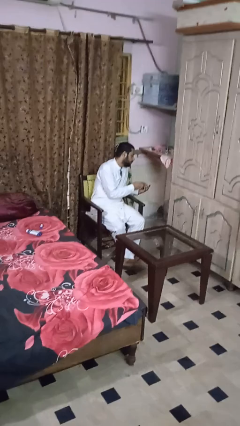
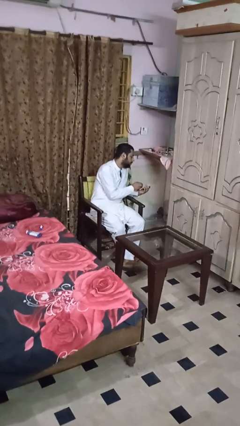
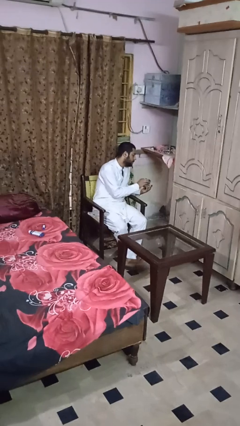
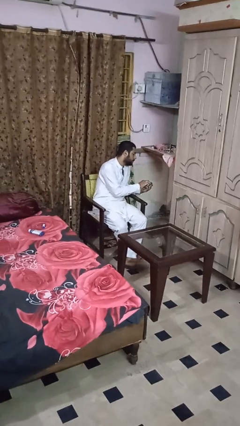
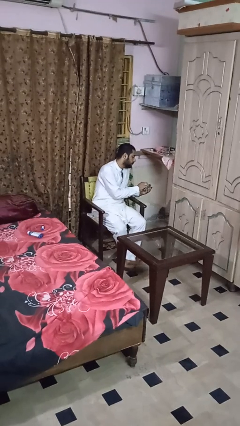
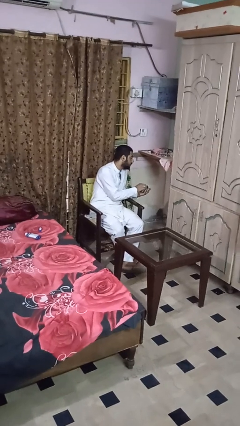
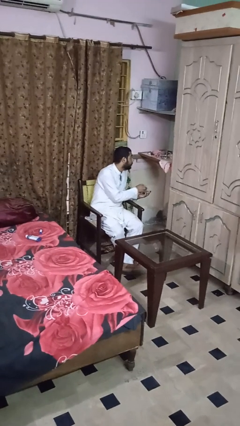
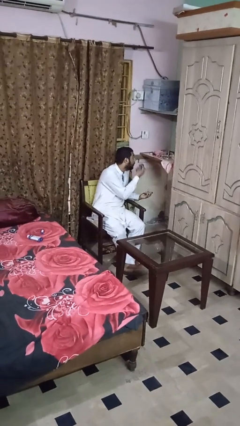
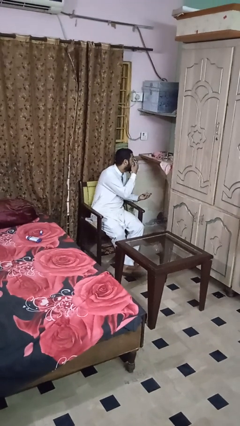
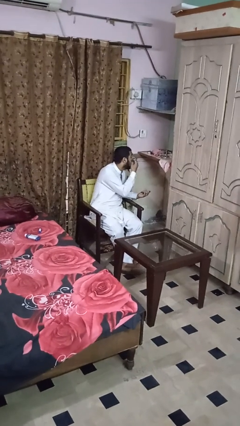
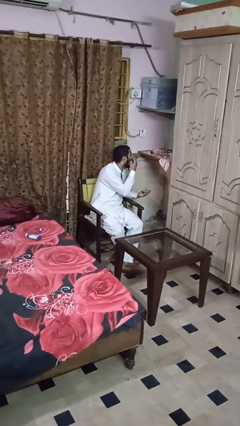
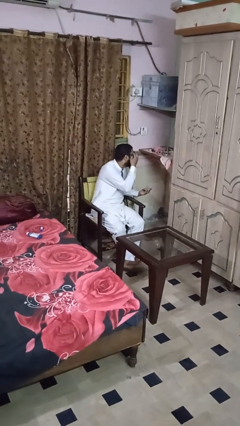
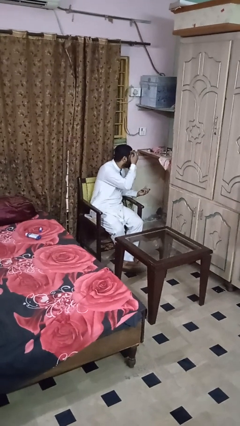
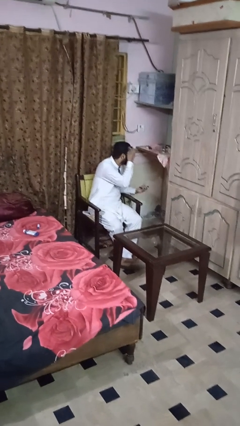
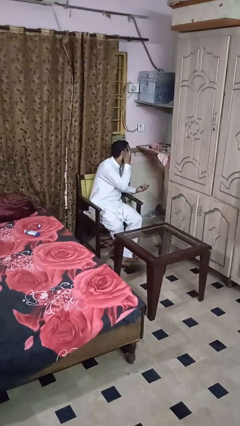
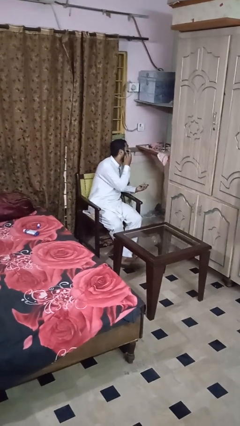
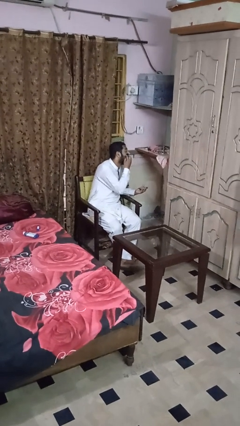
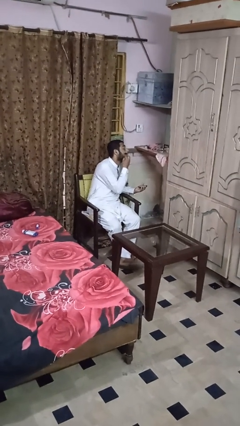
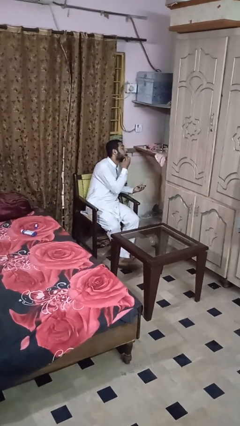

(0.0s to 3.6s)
person applies foundation makeup

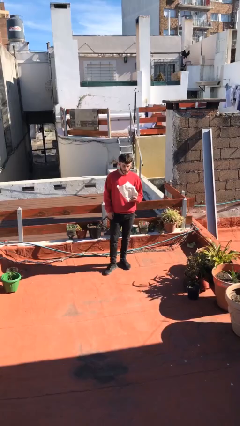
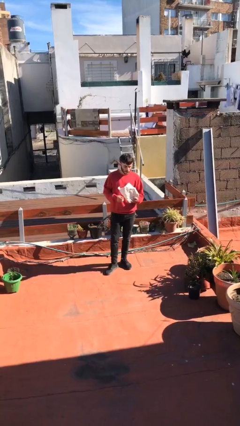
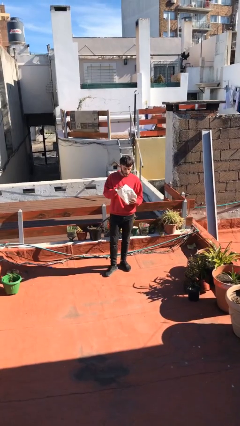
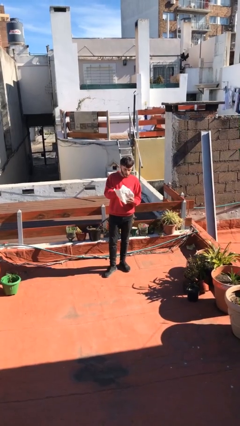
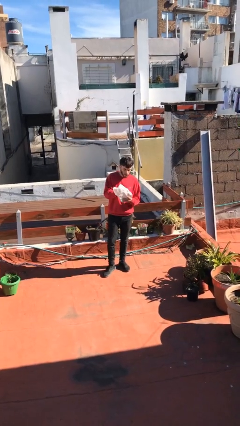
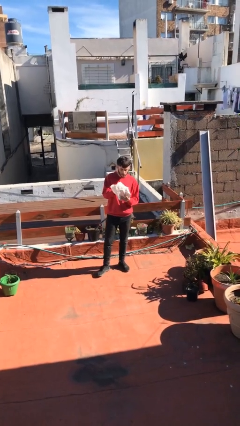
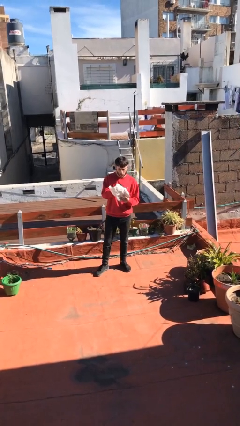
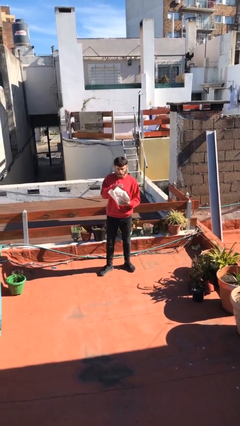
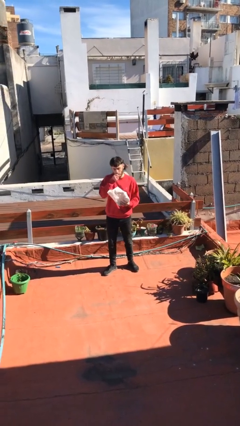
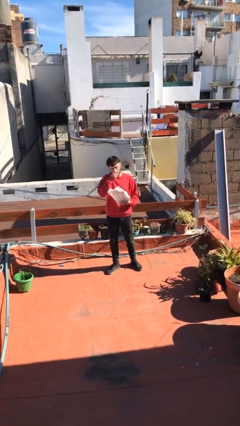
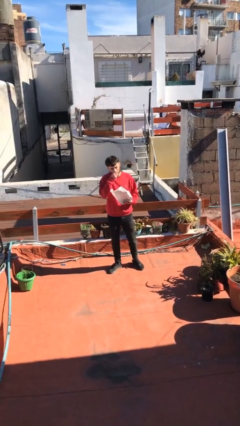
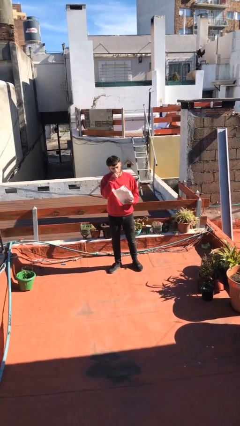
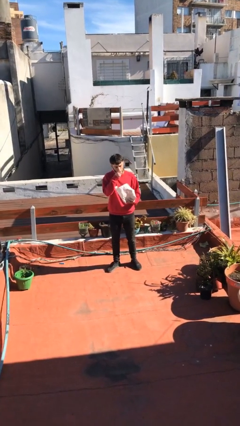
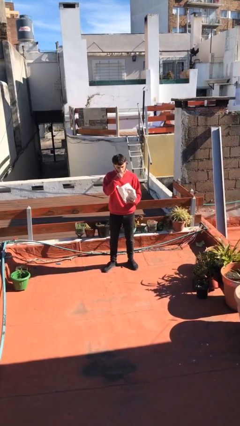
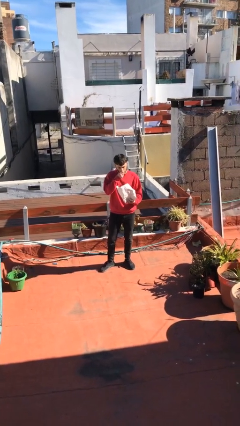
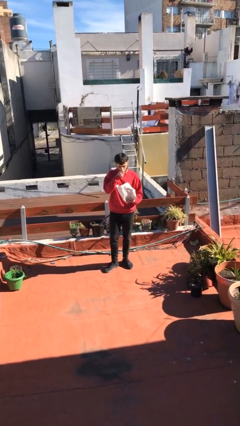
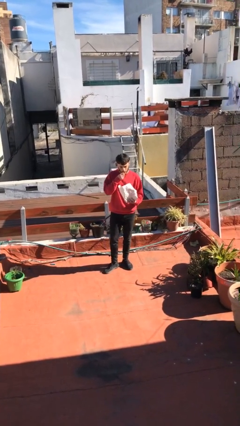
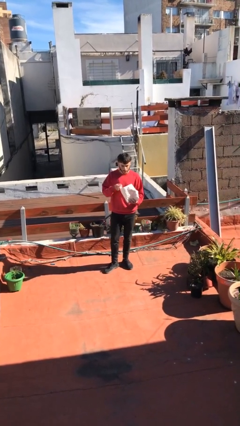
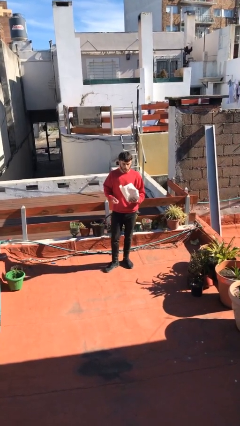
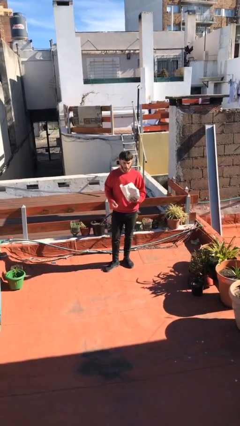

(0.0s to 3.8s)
person eats snack from bag

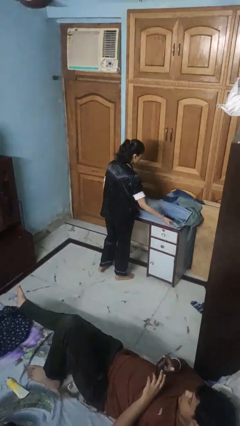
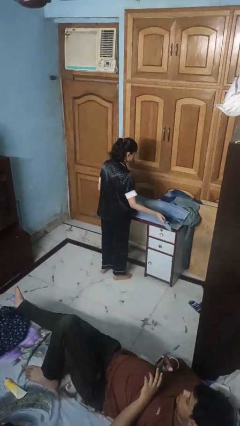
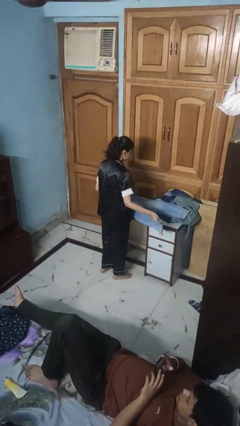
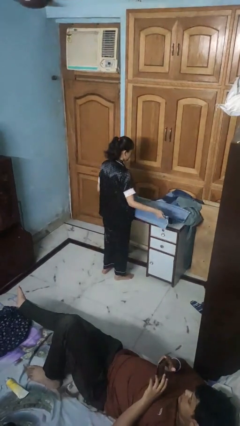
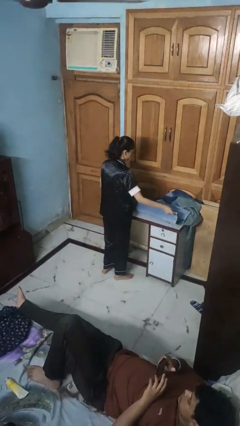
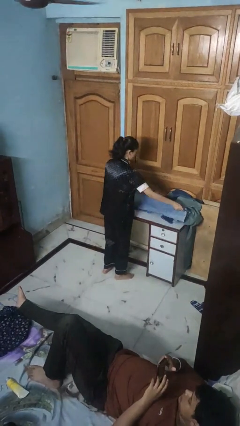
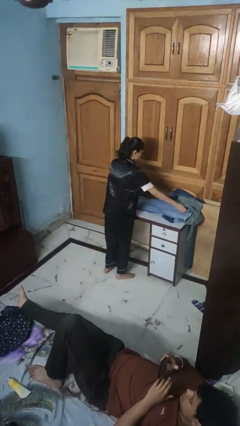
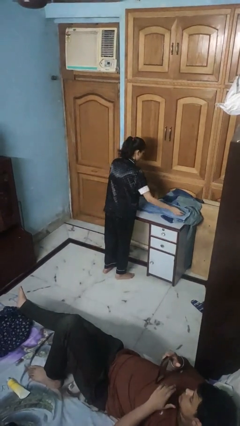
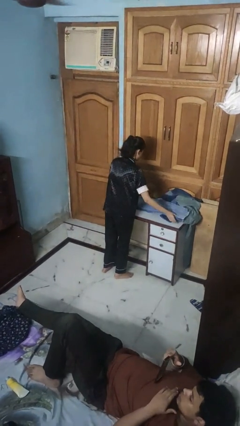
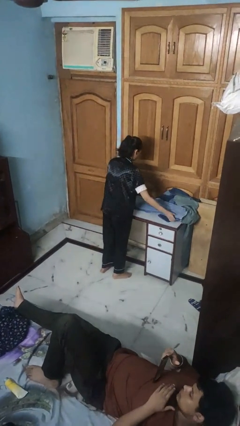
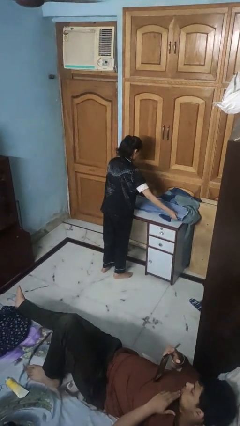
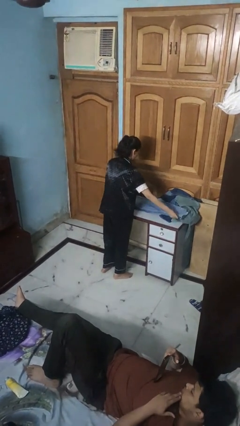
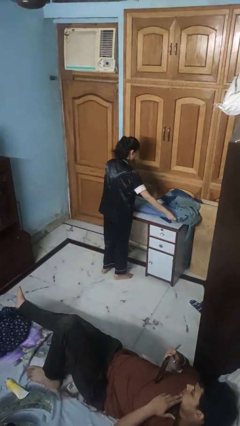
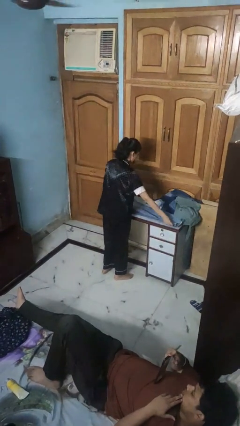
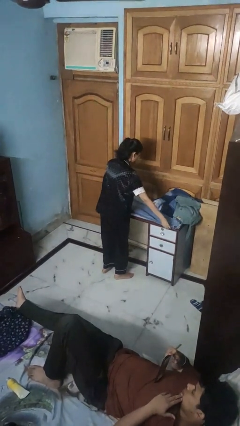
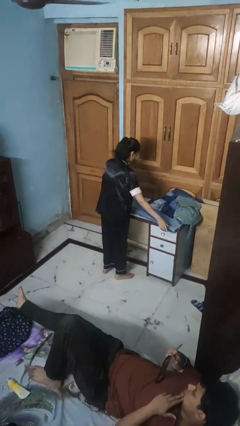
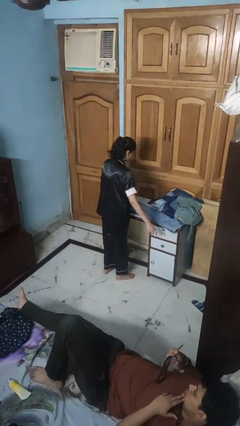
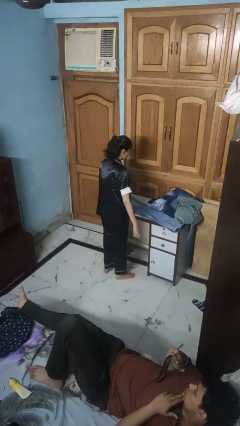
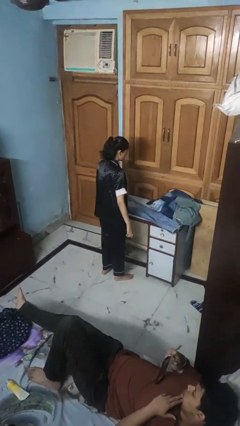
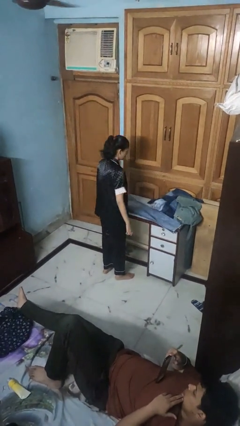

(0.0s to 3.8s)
person folds pants

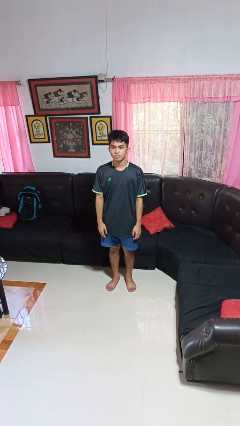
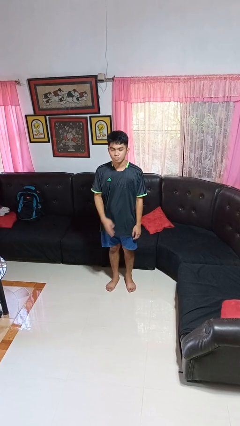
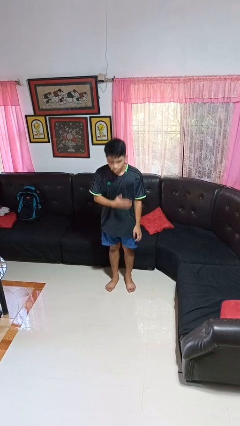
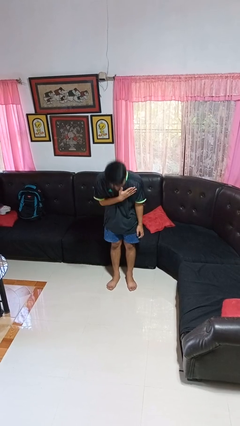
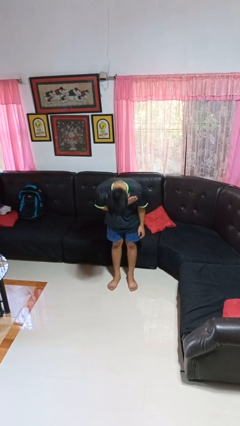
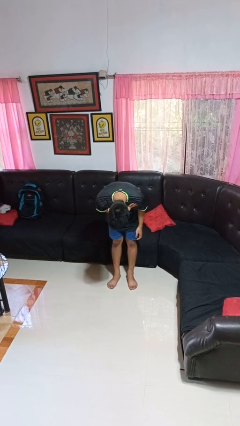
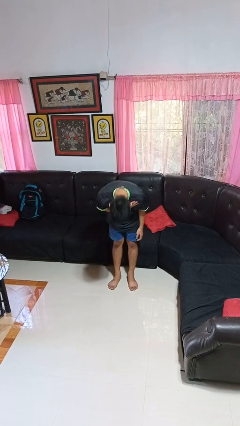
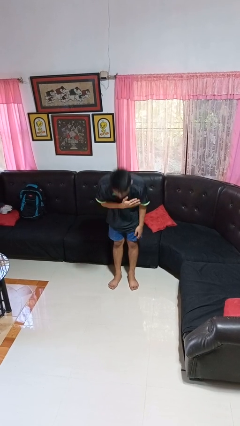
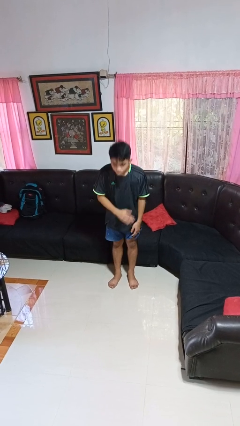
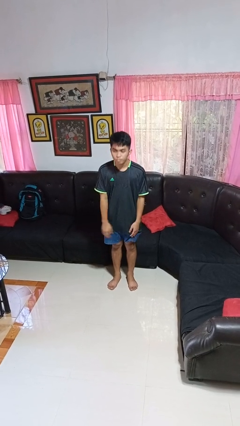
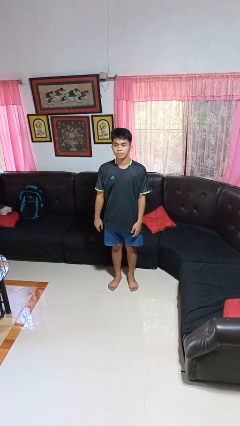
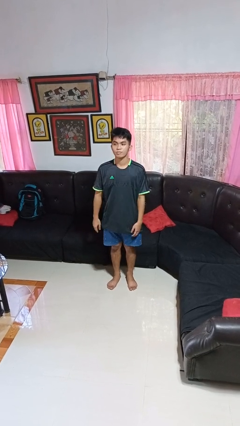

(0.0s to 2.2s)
person bows

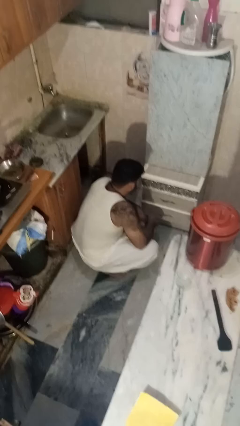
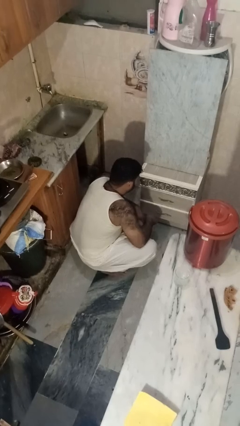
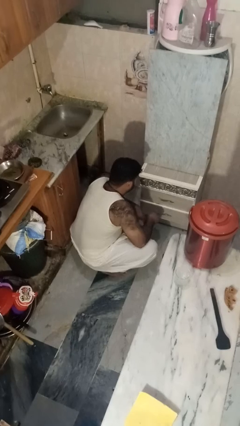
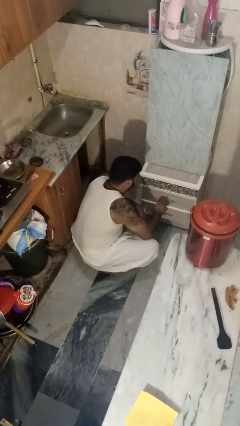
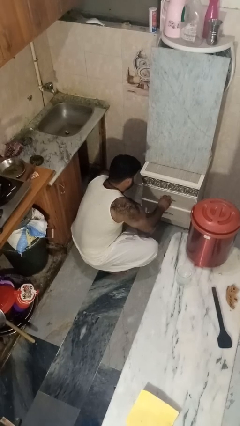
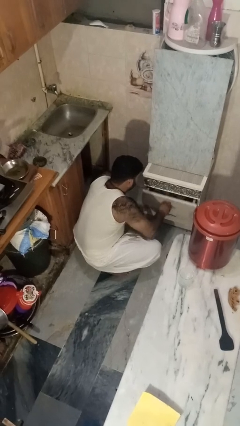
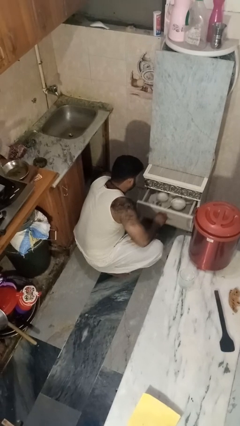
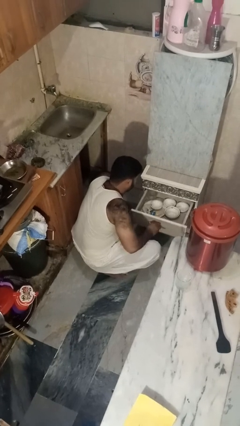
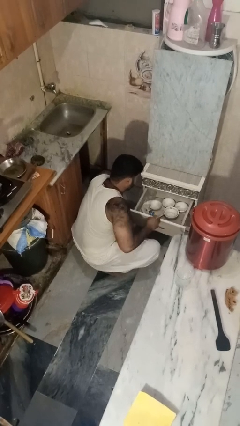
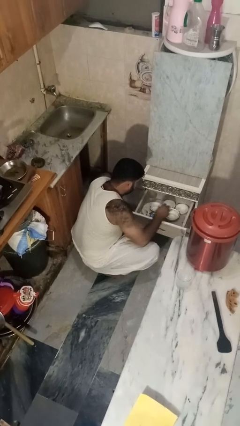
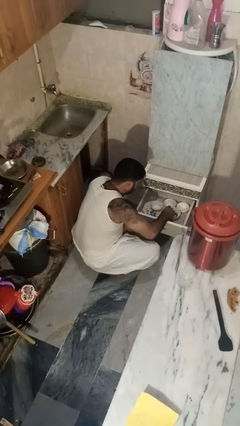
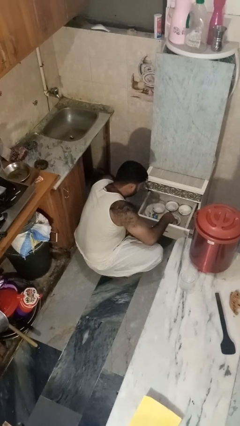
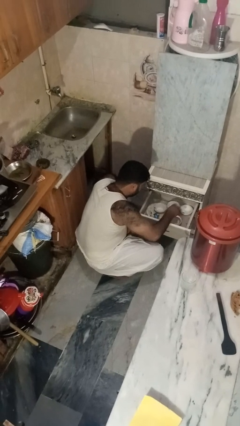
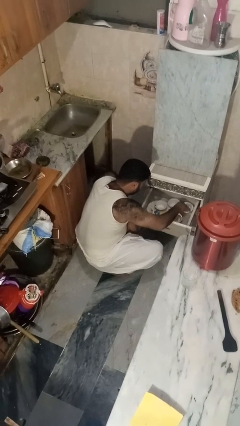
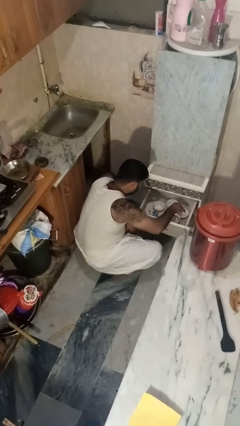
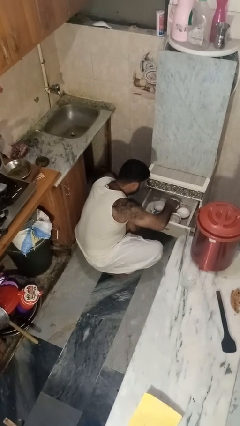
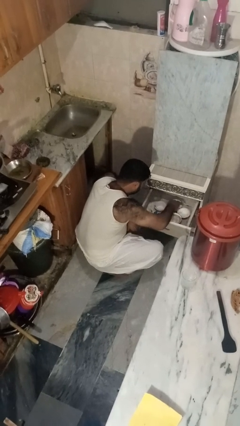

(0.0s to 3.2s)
person searches in kitchen drawer

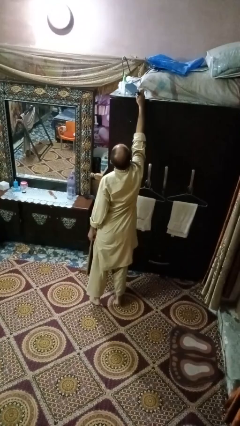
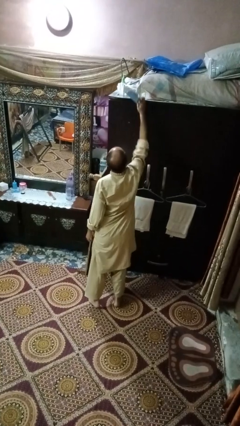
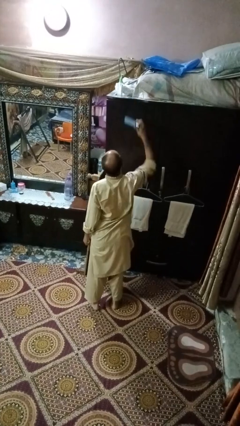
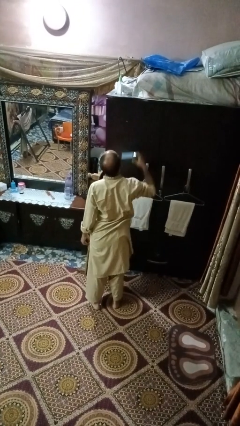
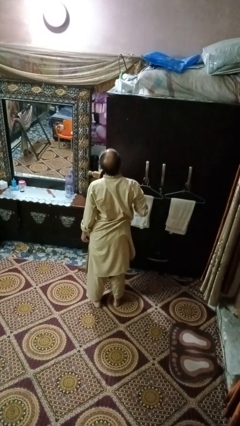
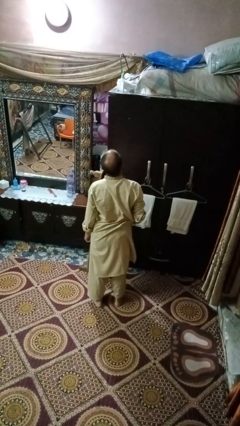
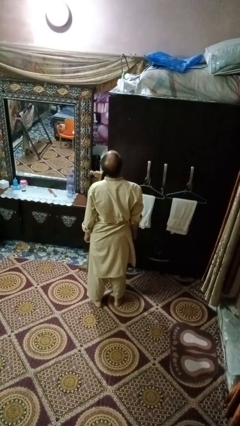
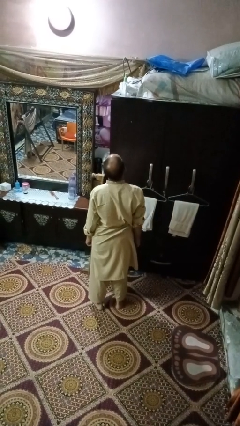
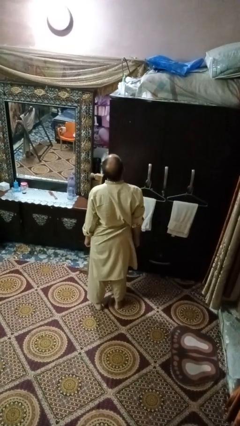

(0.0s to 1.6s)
person puts down object on countertop
